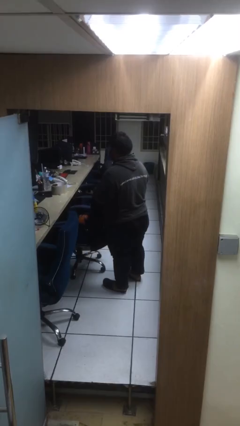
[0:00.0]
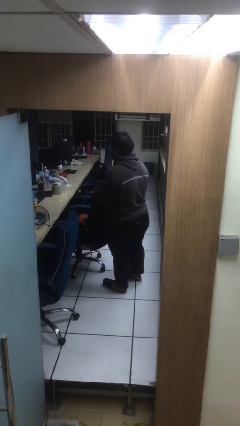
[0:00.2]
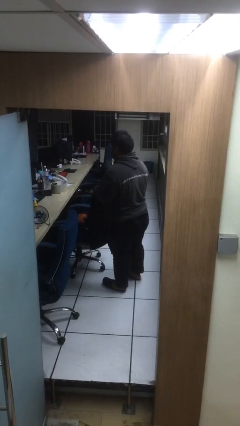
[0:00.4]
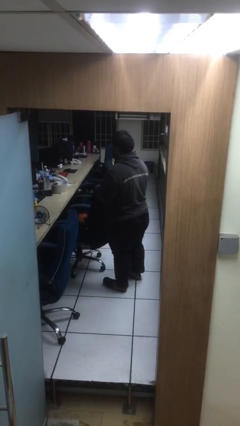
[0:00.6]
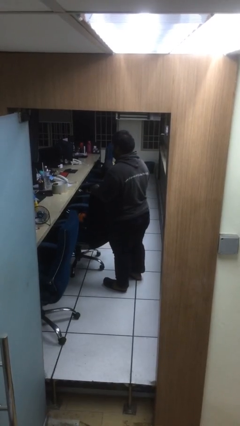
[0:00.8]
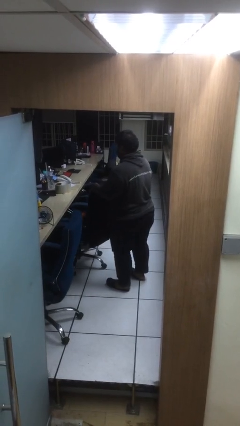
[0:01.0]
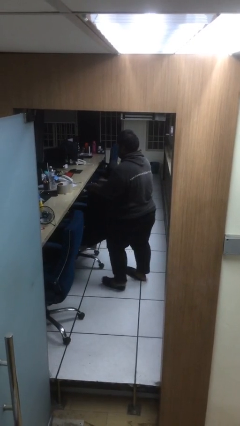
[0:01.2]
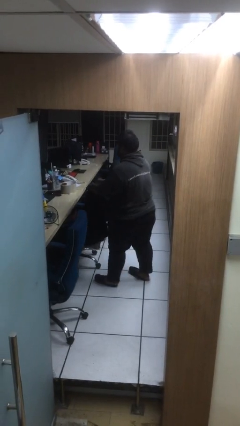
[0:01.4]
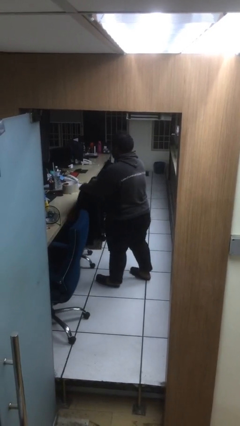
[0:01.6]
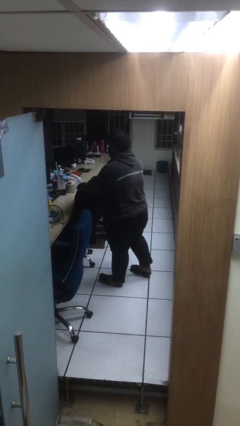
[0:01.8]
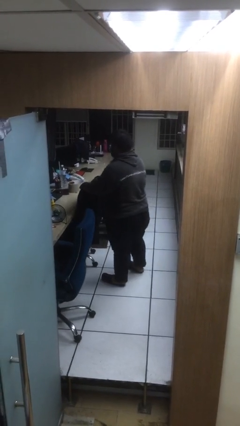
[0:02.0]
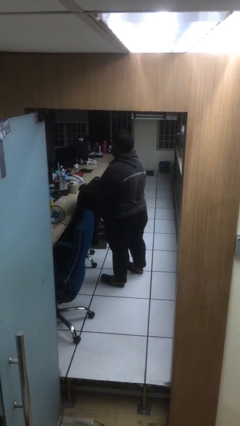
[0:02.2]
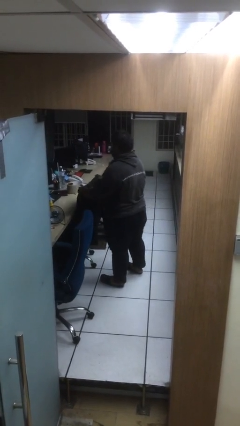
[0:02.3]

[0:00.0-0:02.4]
person pushes in chair

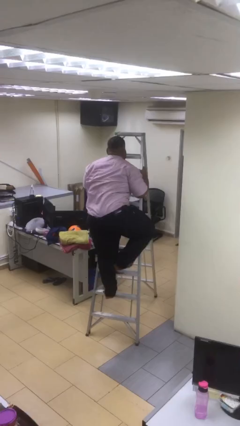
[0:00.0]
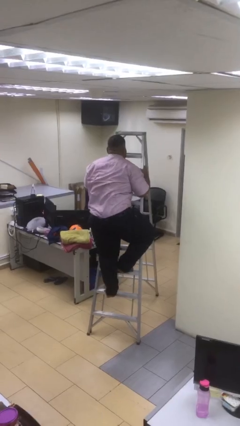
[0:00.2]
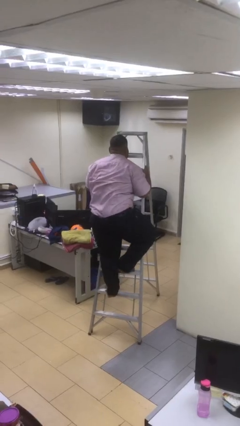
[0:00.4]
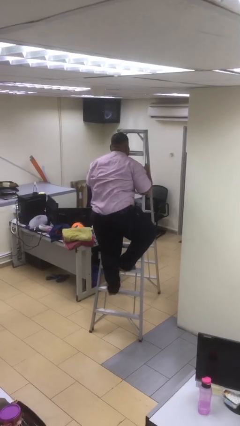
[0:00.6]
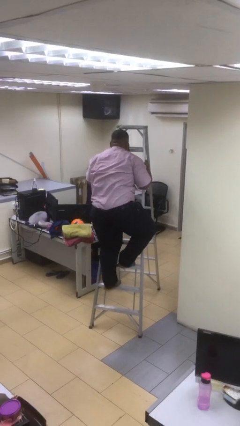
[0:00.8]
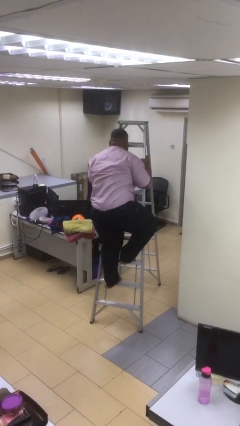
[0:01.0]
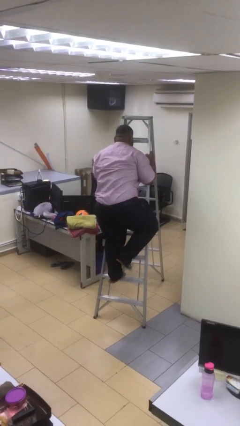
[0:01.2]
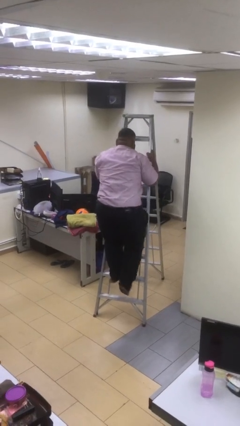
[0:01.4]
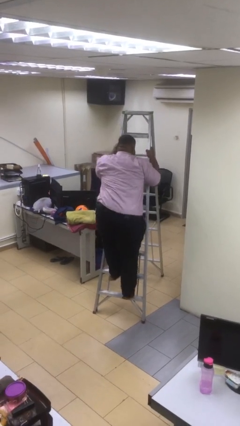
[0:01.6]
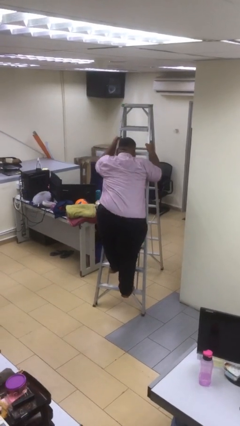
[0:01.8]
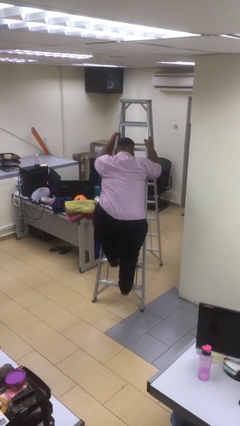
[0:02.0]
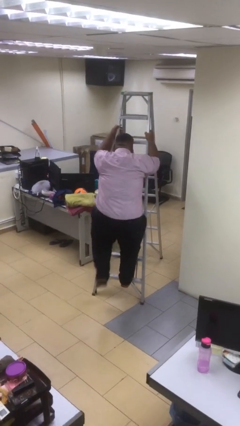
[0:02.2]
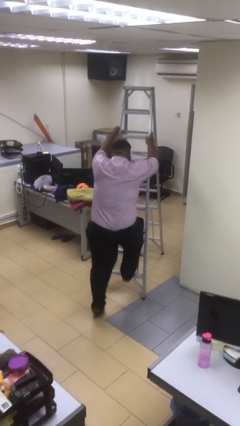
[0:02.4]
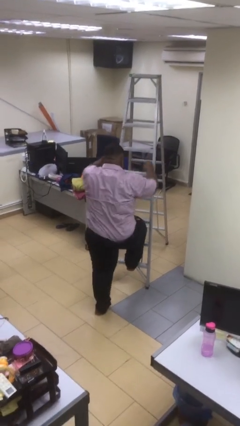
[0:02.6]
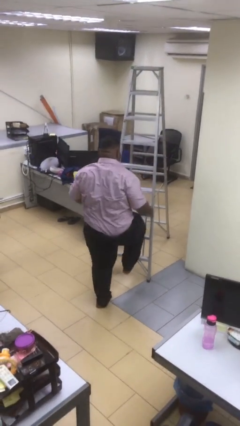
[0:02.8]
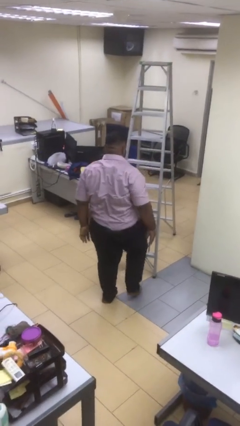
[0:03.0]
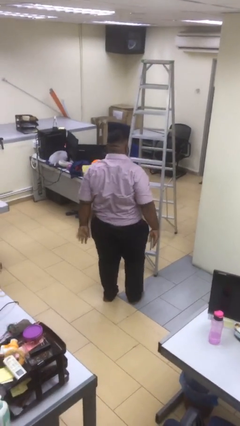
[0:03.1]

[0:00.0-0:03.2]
person climbs down ladder

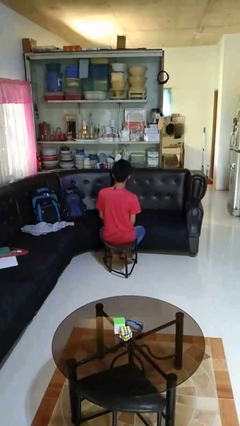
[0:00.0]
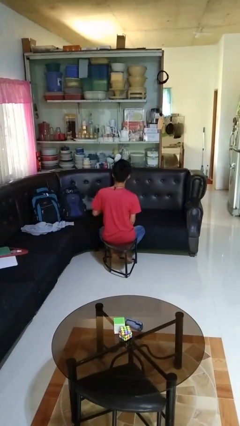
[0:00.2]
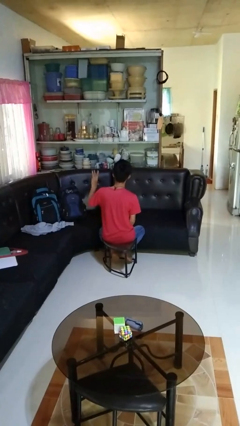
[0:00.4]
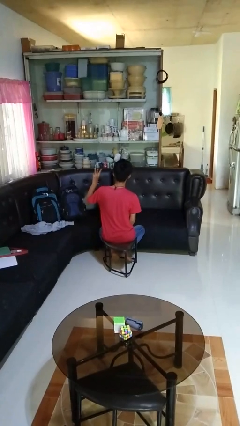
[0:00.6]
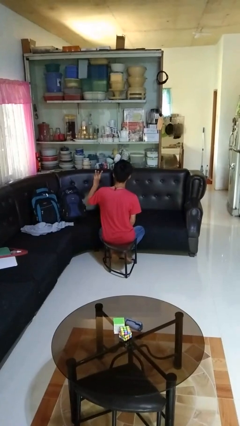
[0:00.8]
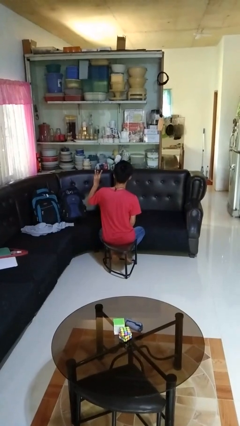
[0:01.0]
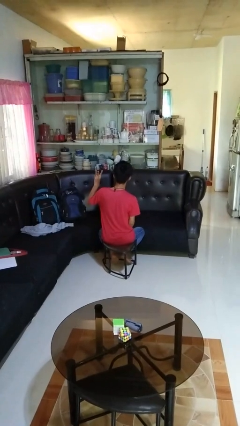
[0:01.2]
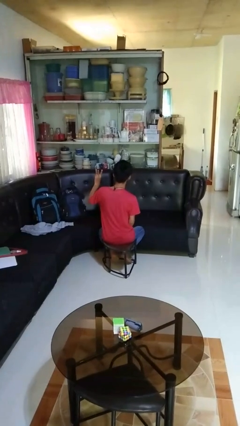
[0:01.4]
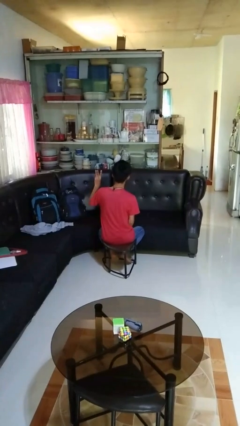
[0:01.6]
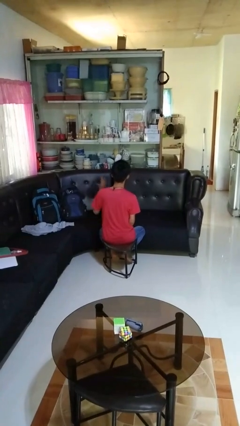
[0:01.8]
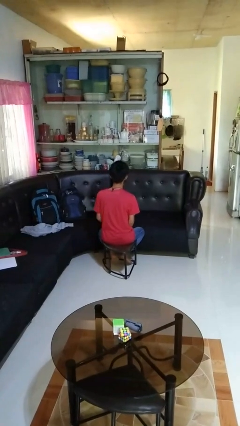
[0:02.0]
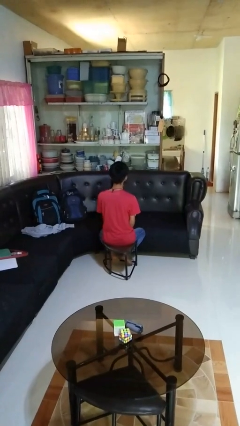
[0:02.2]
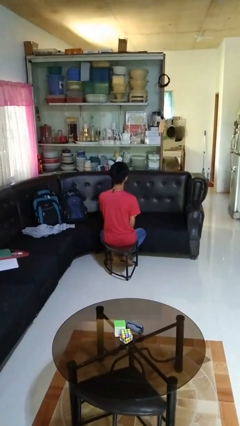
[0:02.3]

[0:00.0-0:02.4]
person gestures number three

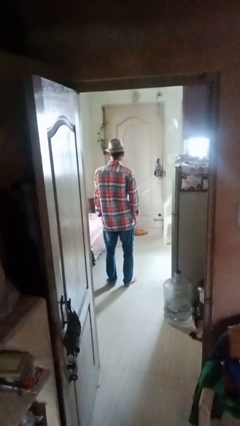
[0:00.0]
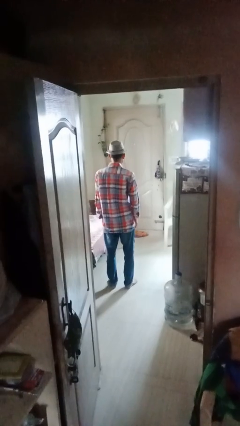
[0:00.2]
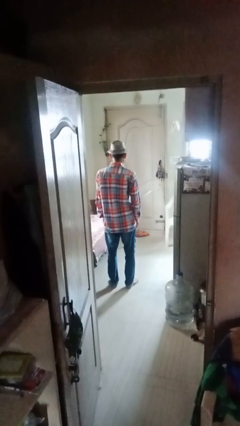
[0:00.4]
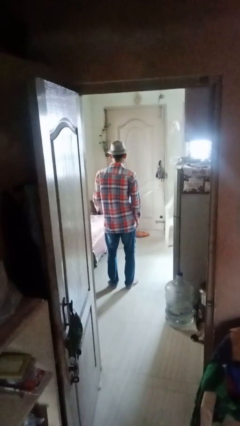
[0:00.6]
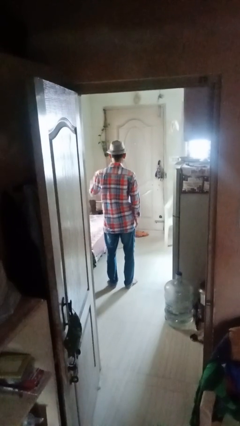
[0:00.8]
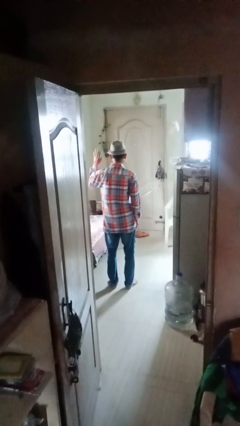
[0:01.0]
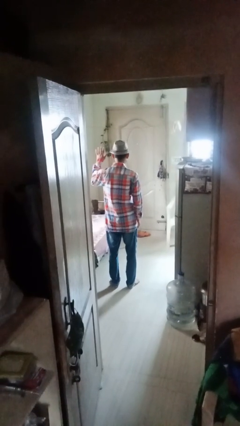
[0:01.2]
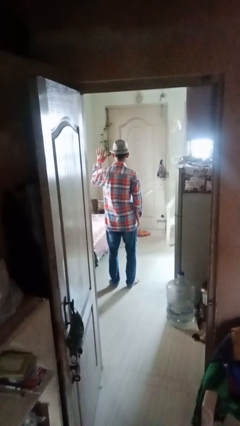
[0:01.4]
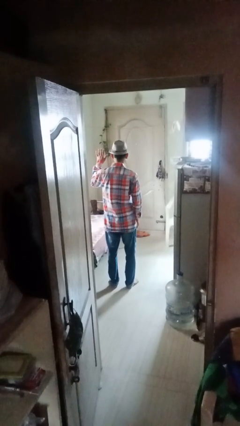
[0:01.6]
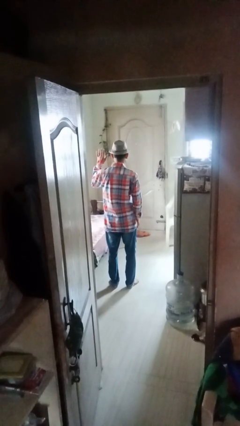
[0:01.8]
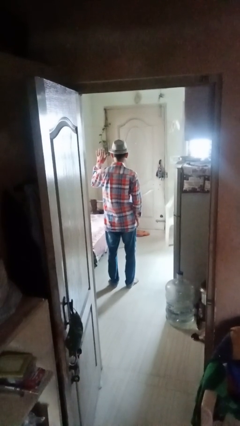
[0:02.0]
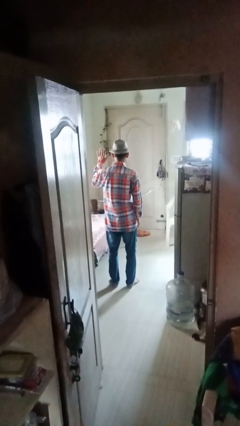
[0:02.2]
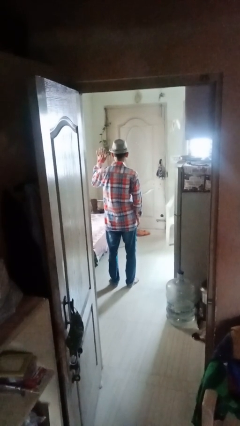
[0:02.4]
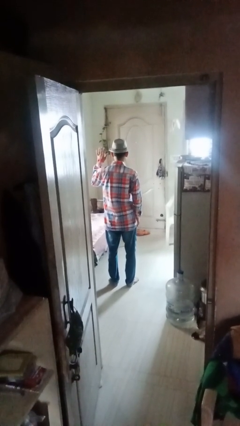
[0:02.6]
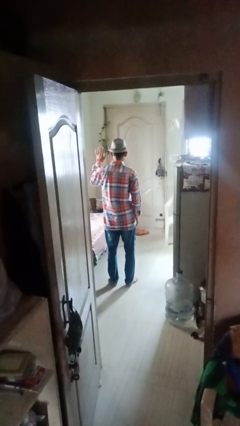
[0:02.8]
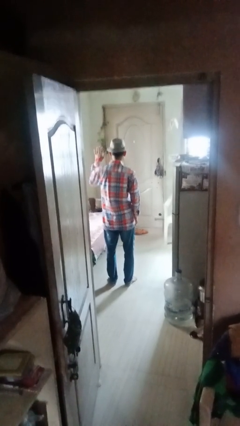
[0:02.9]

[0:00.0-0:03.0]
person gestures number five

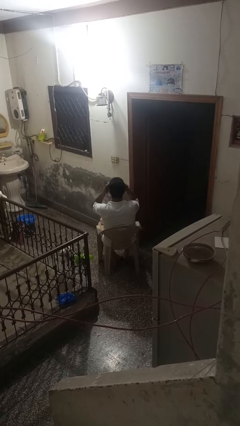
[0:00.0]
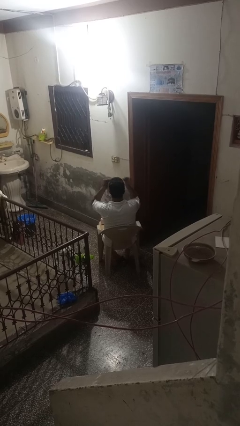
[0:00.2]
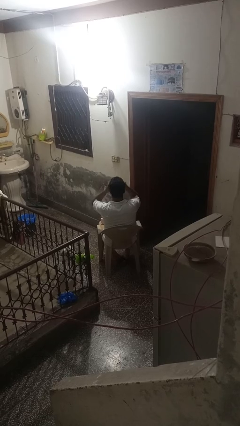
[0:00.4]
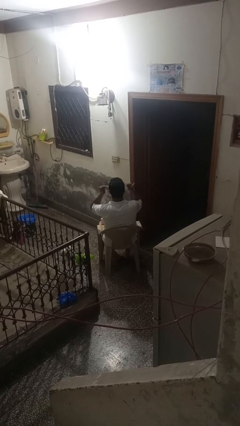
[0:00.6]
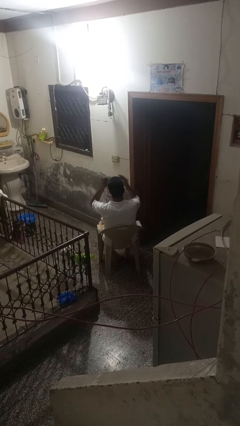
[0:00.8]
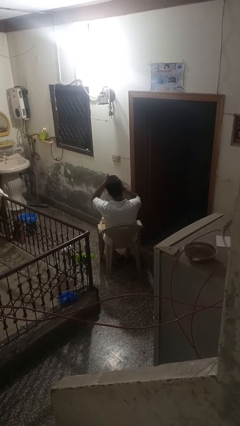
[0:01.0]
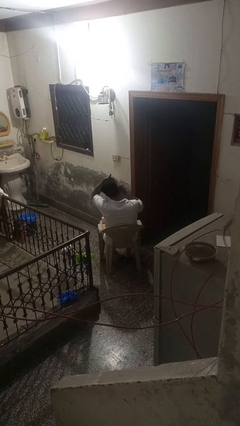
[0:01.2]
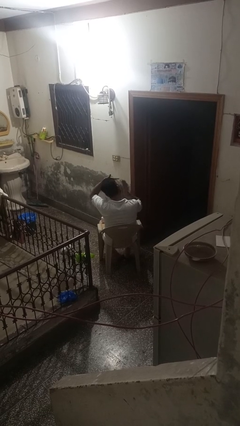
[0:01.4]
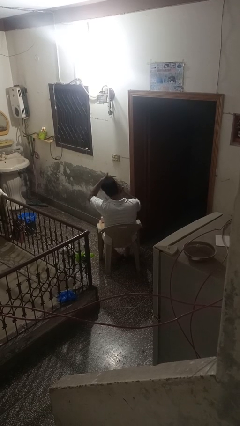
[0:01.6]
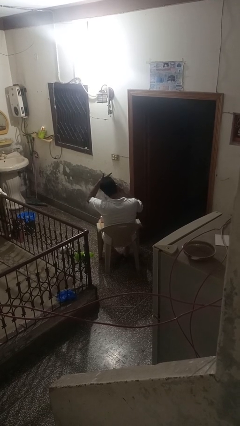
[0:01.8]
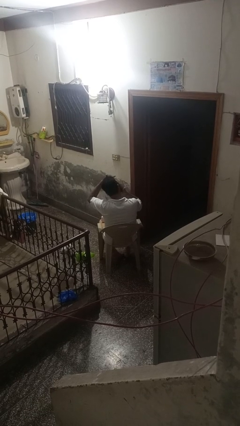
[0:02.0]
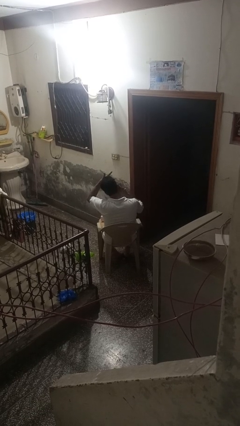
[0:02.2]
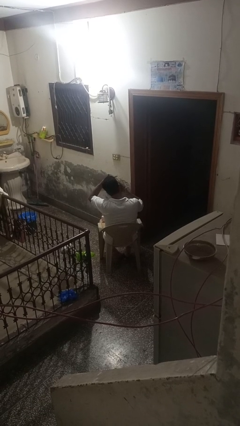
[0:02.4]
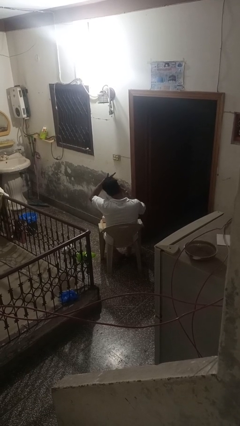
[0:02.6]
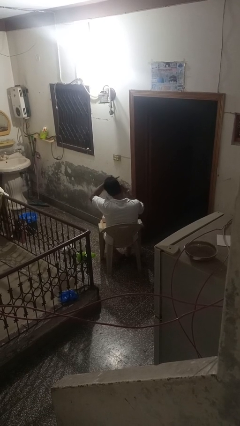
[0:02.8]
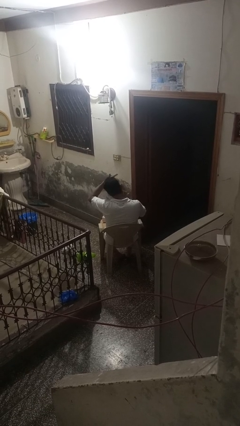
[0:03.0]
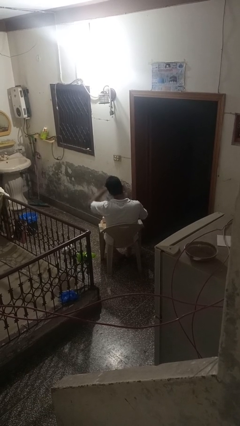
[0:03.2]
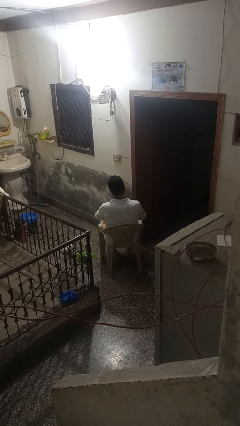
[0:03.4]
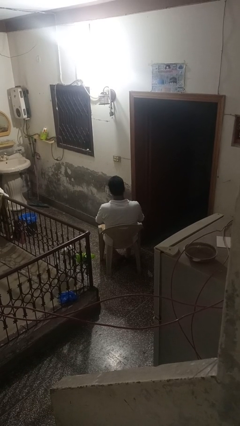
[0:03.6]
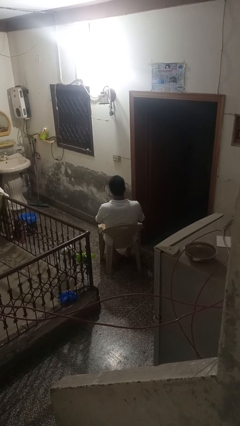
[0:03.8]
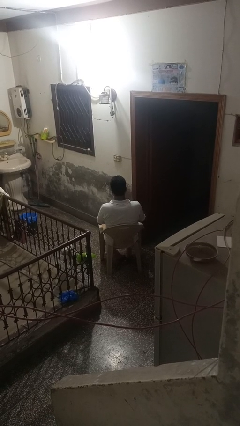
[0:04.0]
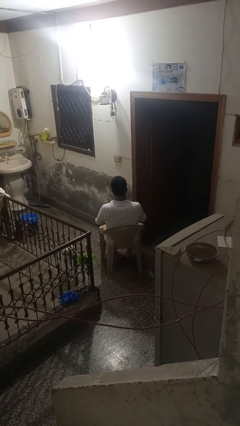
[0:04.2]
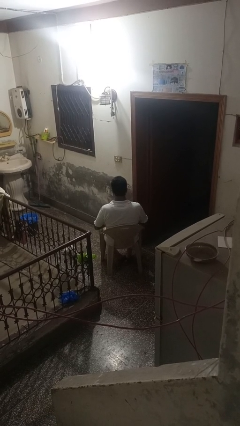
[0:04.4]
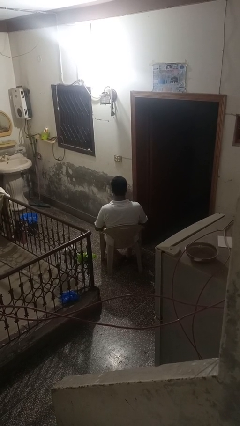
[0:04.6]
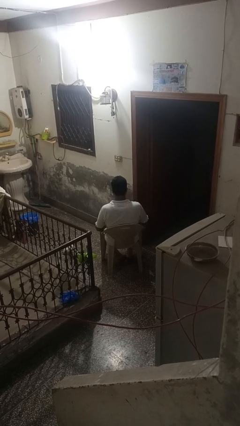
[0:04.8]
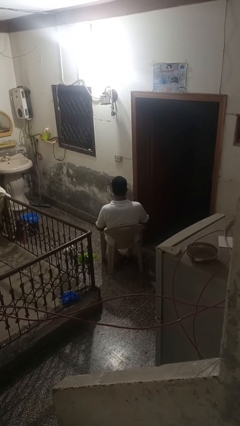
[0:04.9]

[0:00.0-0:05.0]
person washes hands

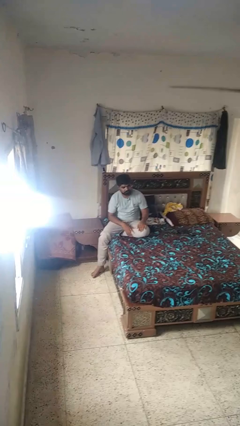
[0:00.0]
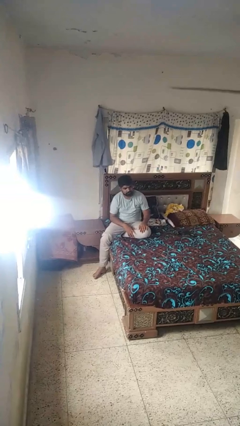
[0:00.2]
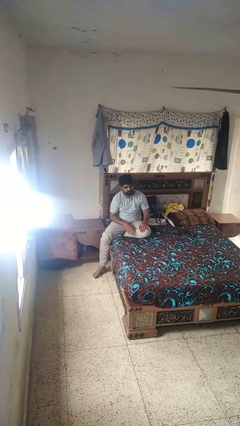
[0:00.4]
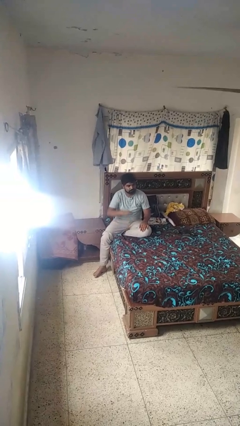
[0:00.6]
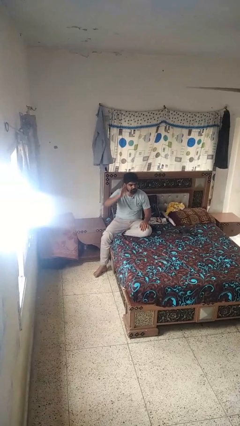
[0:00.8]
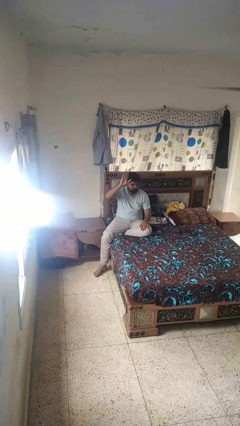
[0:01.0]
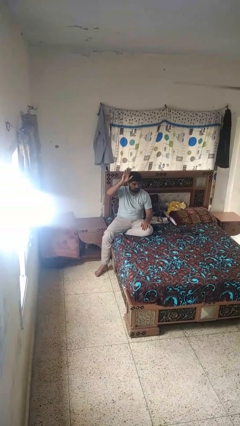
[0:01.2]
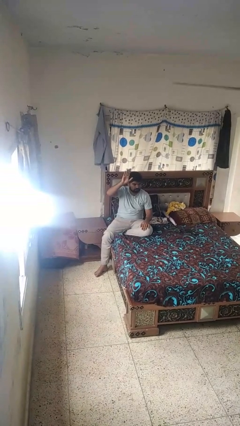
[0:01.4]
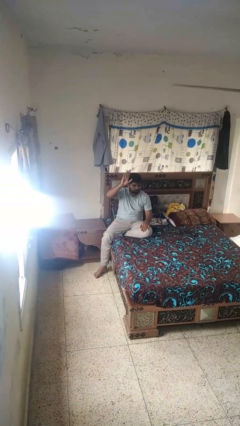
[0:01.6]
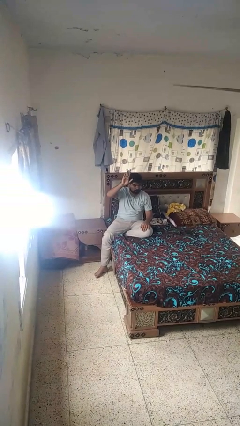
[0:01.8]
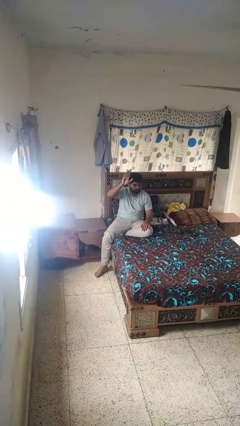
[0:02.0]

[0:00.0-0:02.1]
person gestures raise hand
